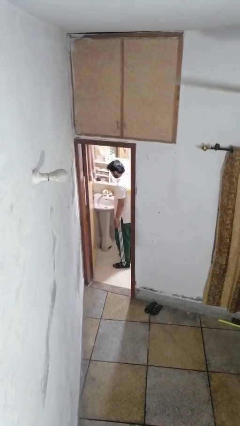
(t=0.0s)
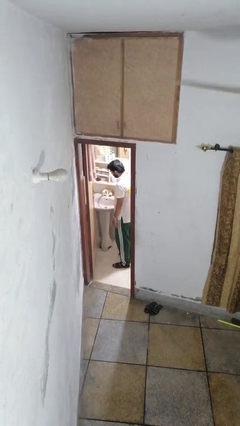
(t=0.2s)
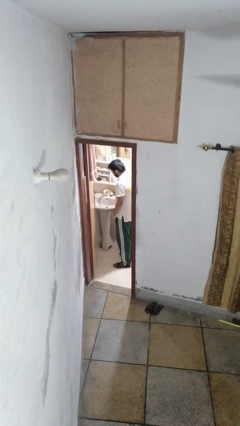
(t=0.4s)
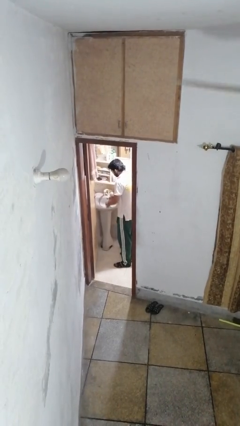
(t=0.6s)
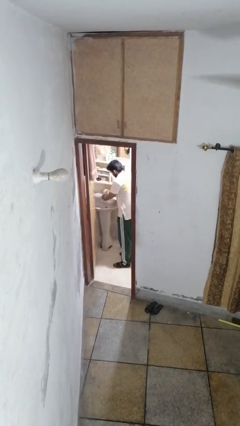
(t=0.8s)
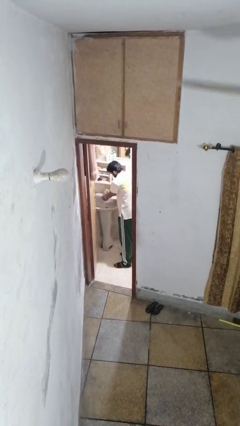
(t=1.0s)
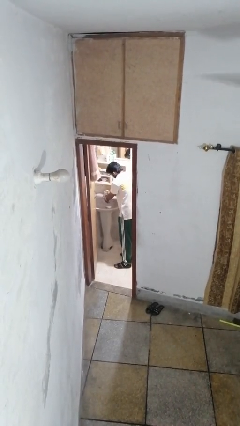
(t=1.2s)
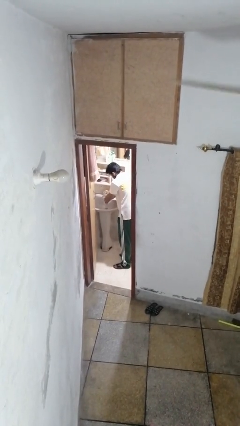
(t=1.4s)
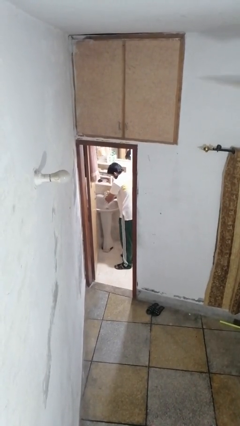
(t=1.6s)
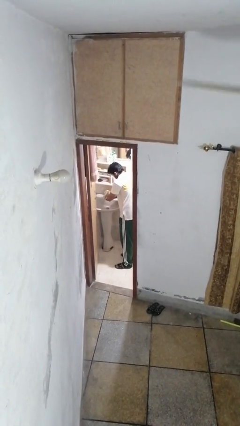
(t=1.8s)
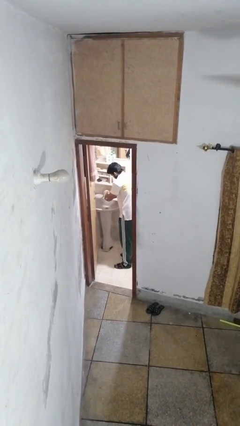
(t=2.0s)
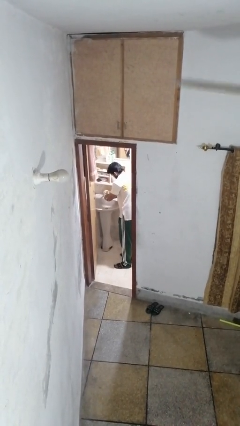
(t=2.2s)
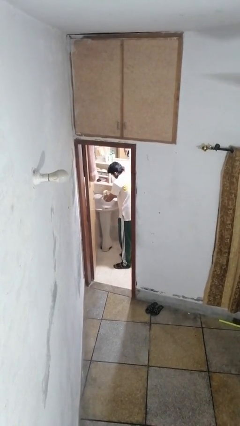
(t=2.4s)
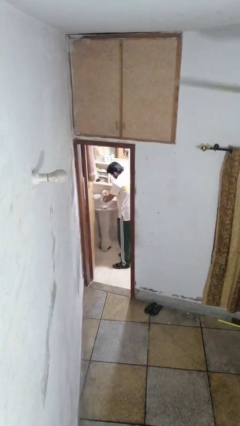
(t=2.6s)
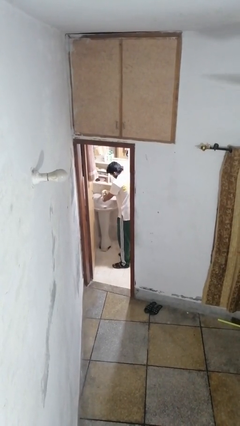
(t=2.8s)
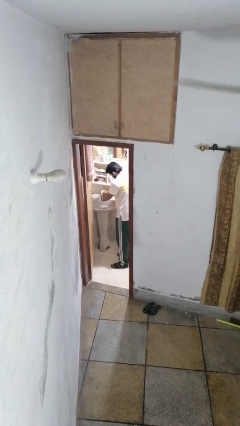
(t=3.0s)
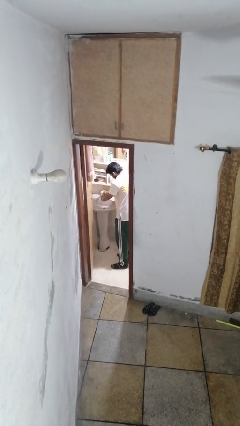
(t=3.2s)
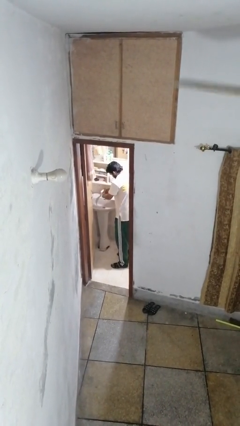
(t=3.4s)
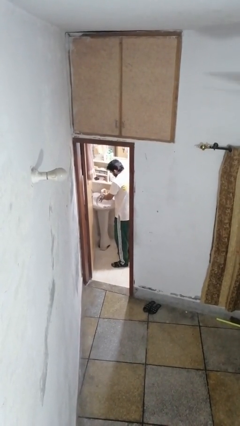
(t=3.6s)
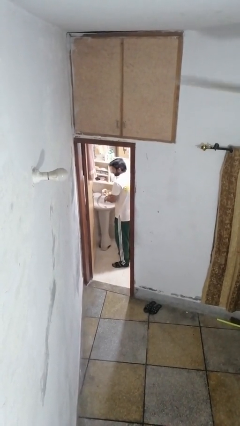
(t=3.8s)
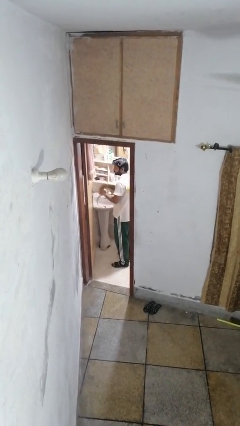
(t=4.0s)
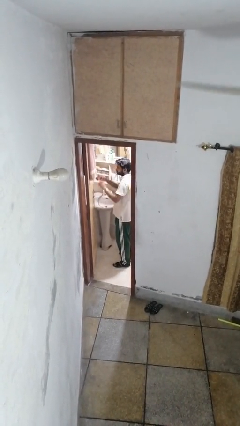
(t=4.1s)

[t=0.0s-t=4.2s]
person washes hands

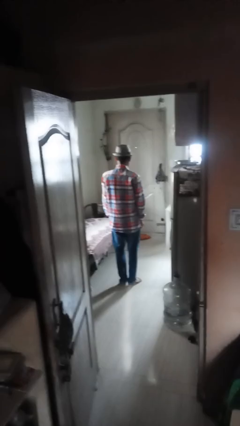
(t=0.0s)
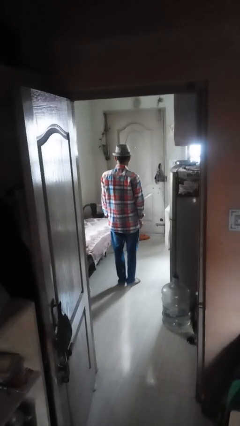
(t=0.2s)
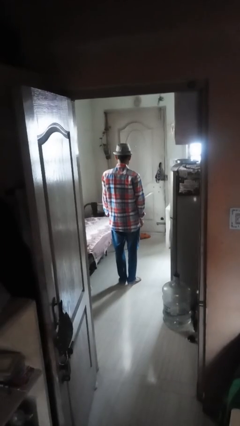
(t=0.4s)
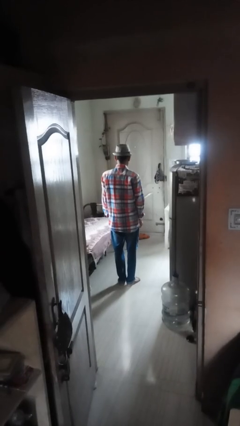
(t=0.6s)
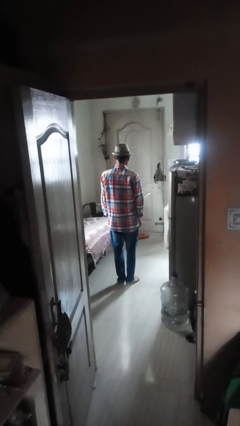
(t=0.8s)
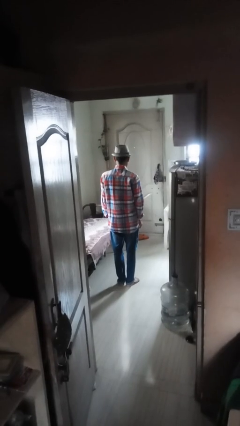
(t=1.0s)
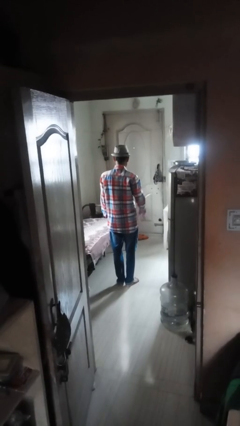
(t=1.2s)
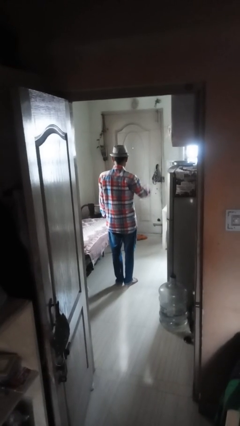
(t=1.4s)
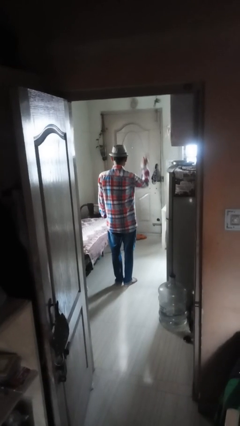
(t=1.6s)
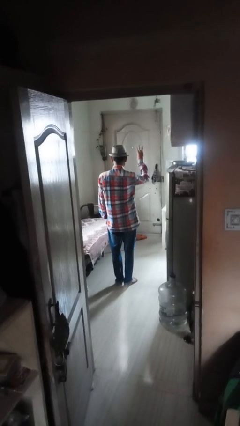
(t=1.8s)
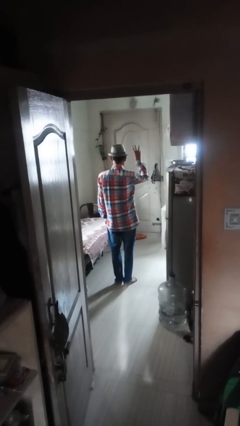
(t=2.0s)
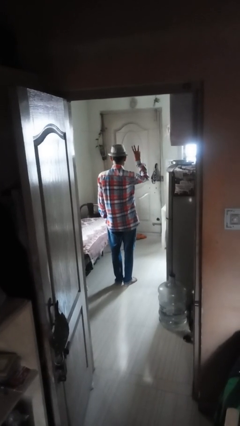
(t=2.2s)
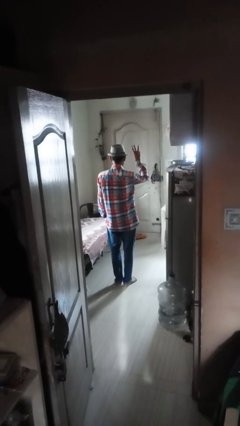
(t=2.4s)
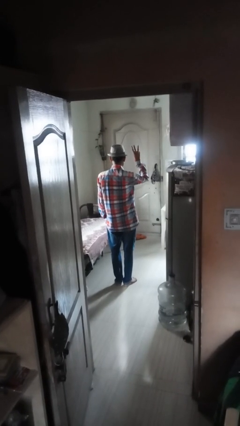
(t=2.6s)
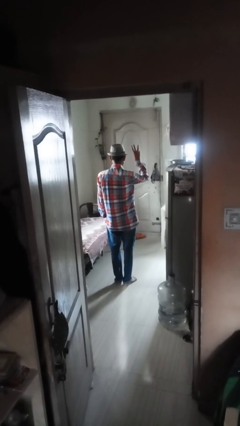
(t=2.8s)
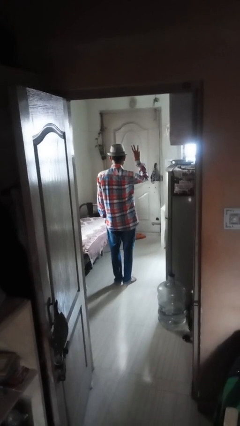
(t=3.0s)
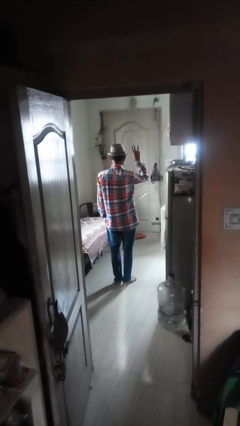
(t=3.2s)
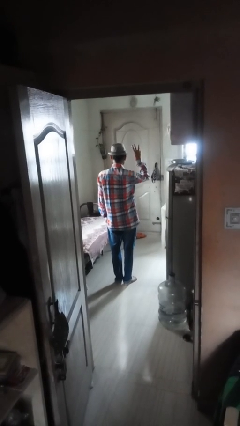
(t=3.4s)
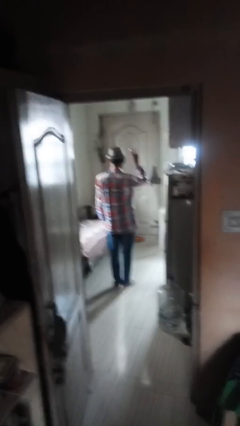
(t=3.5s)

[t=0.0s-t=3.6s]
person gestures number three

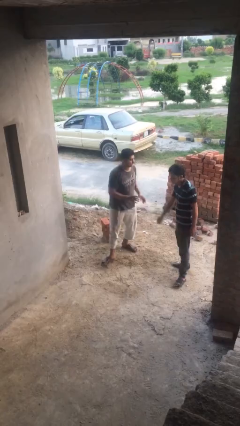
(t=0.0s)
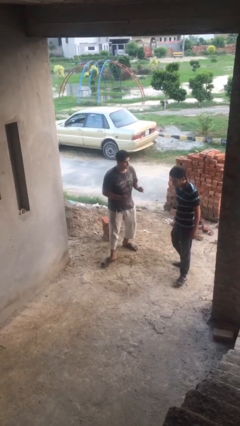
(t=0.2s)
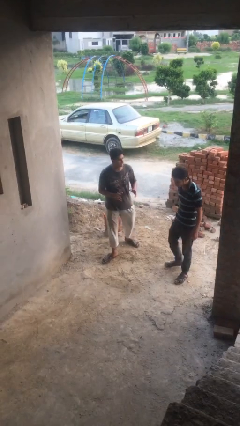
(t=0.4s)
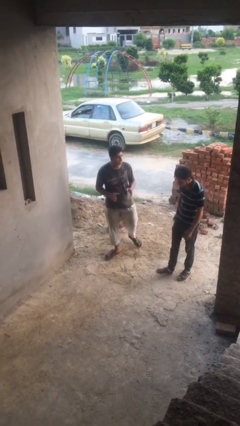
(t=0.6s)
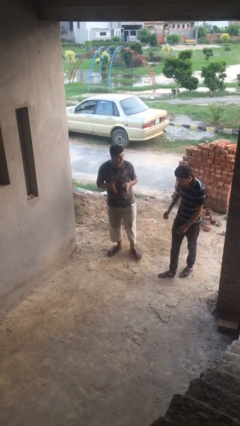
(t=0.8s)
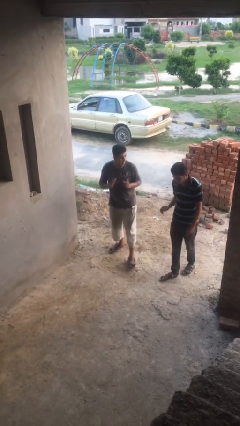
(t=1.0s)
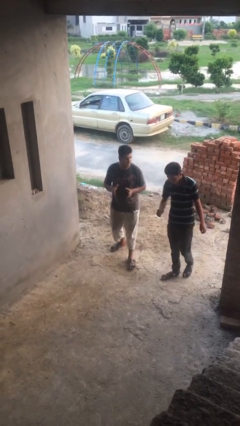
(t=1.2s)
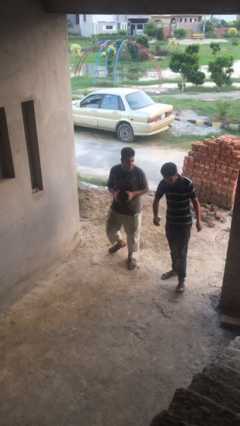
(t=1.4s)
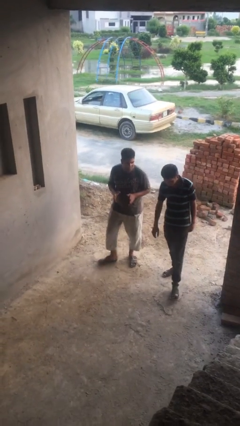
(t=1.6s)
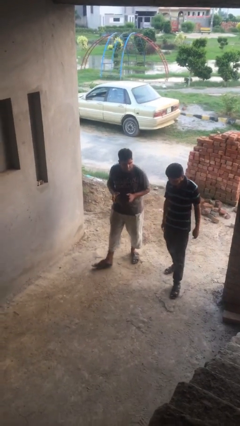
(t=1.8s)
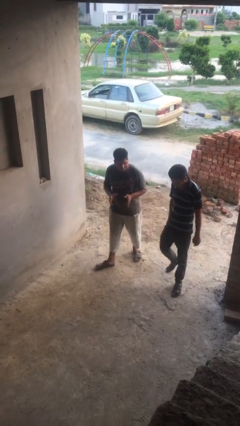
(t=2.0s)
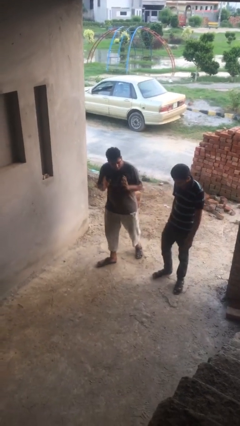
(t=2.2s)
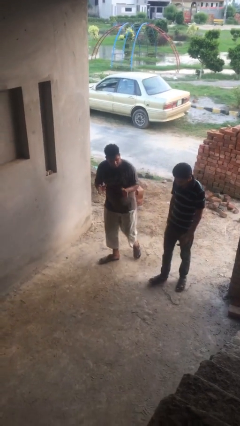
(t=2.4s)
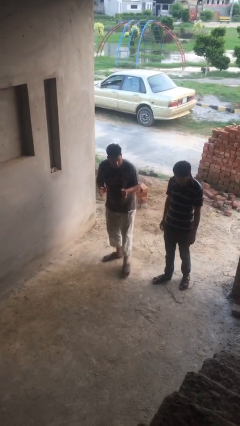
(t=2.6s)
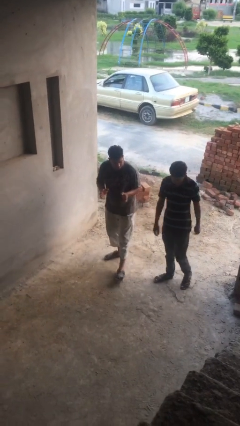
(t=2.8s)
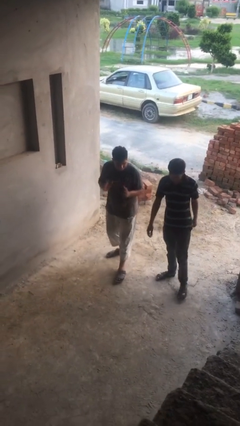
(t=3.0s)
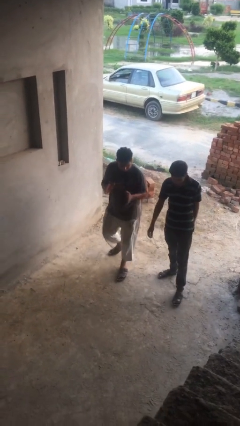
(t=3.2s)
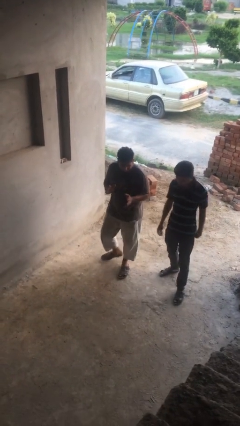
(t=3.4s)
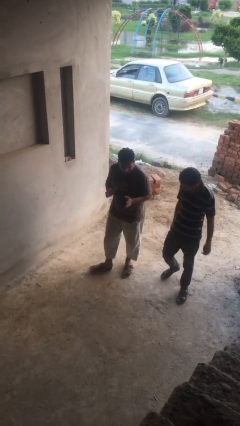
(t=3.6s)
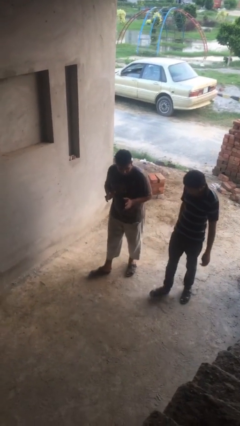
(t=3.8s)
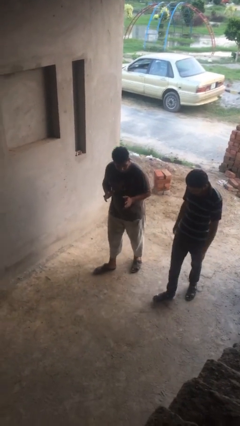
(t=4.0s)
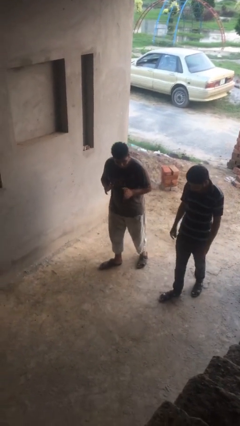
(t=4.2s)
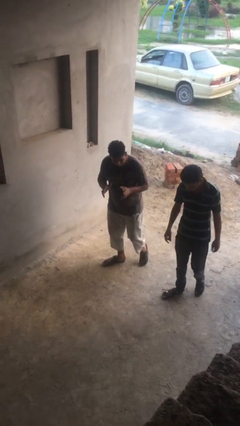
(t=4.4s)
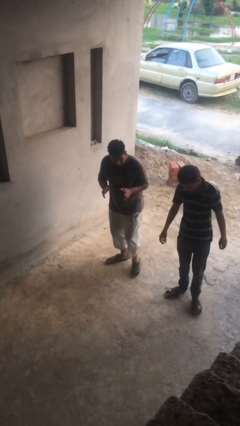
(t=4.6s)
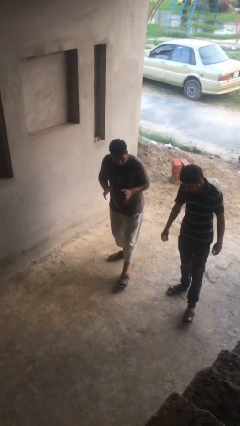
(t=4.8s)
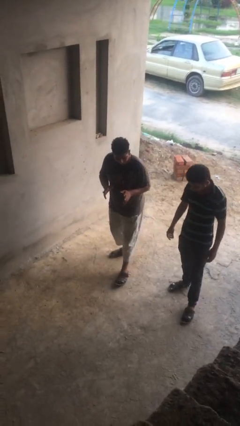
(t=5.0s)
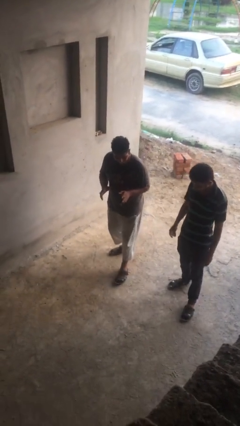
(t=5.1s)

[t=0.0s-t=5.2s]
person talks to person

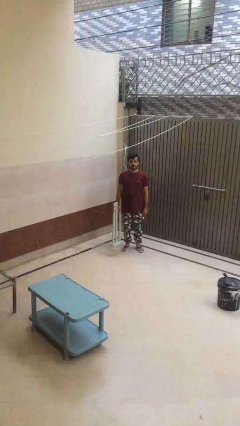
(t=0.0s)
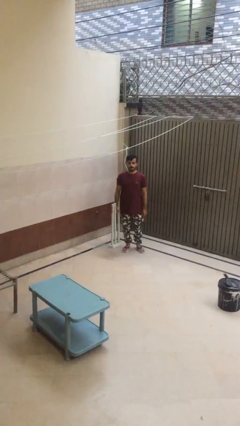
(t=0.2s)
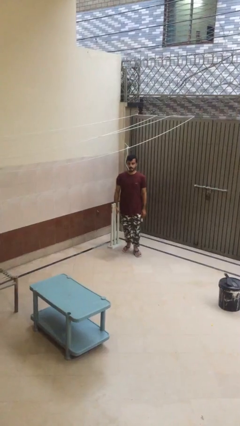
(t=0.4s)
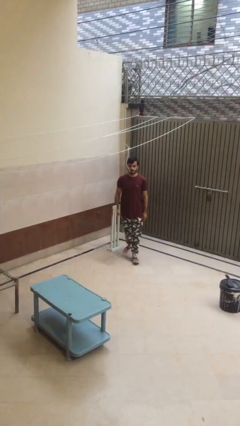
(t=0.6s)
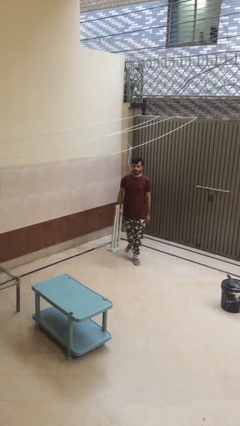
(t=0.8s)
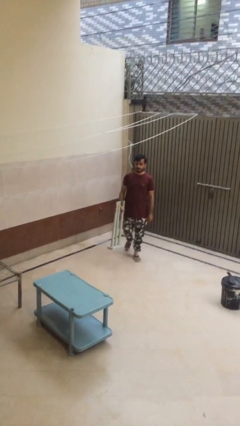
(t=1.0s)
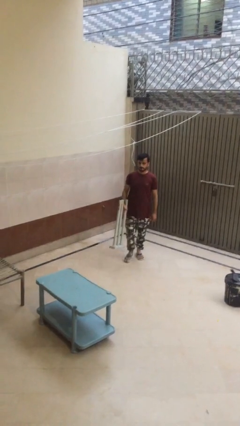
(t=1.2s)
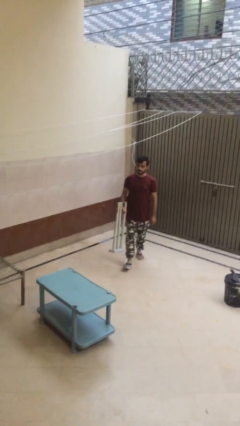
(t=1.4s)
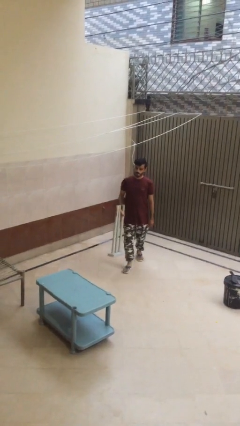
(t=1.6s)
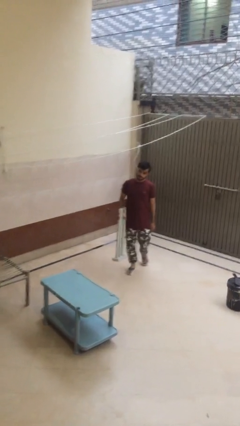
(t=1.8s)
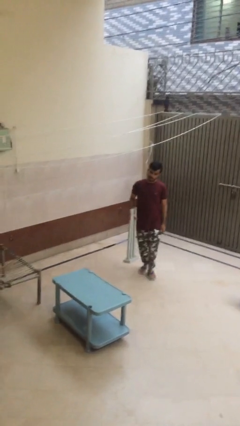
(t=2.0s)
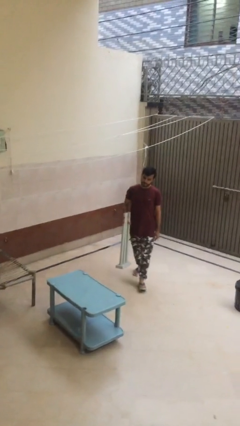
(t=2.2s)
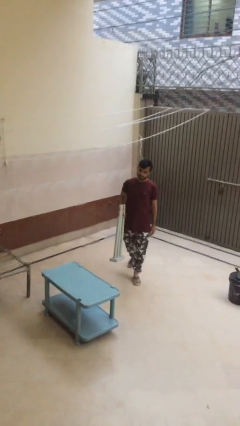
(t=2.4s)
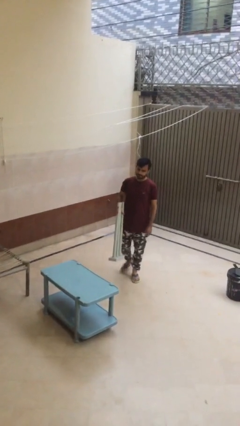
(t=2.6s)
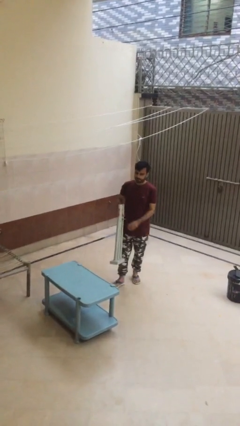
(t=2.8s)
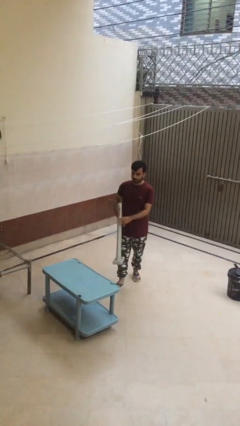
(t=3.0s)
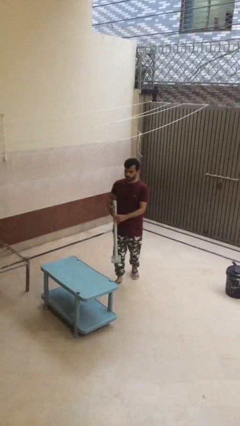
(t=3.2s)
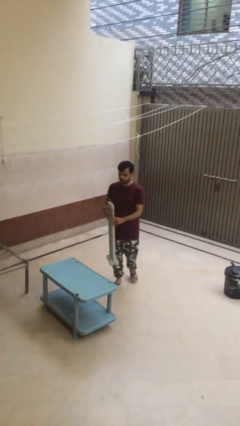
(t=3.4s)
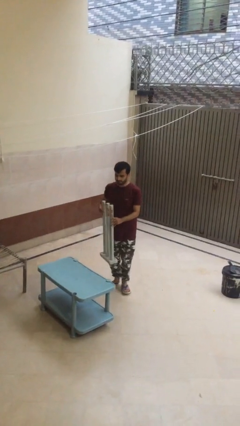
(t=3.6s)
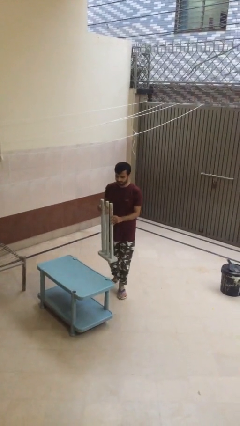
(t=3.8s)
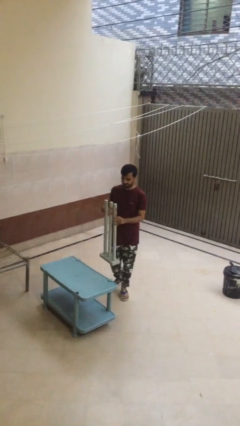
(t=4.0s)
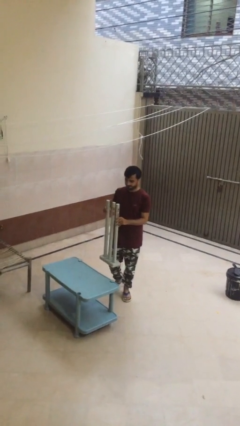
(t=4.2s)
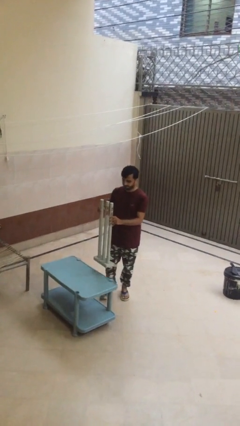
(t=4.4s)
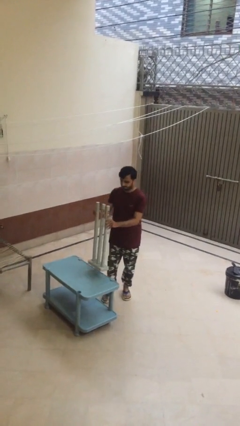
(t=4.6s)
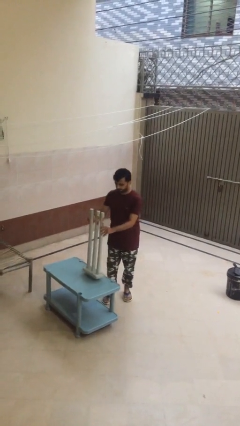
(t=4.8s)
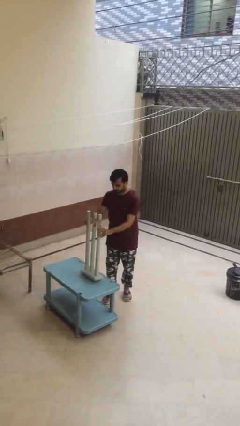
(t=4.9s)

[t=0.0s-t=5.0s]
person puts down object on table

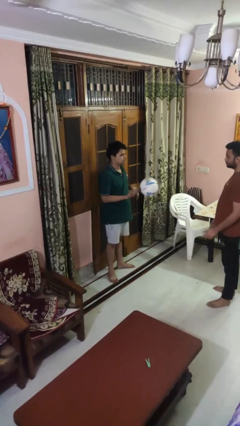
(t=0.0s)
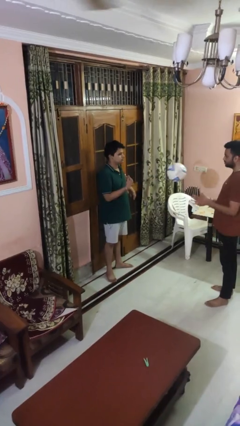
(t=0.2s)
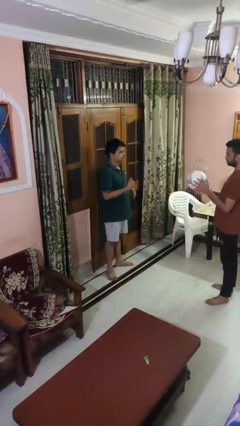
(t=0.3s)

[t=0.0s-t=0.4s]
person throws object to person
